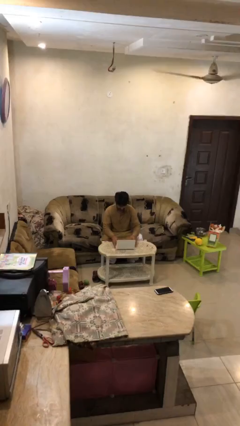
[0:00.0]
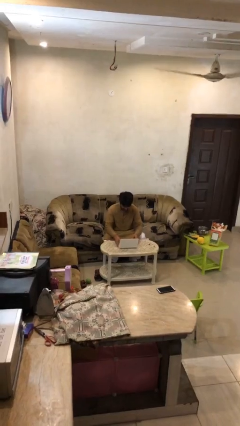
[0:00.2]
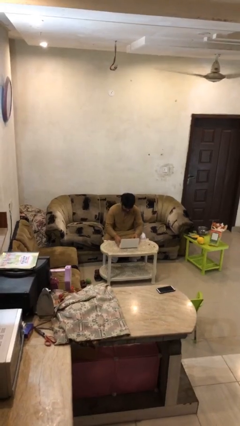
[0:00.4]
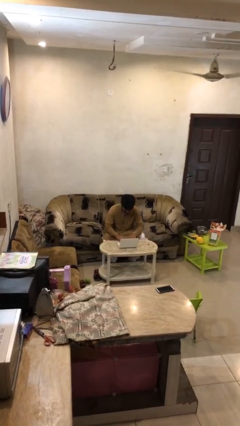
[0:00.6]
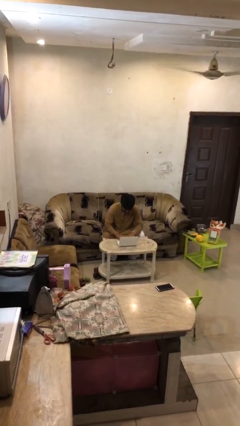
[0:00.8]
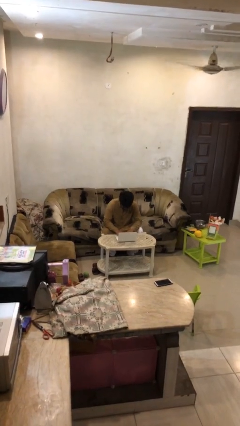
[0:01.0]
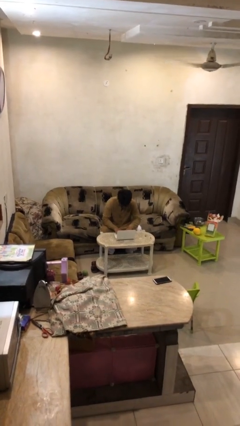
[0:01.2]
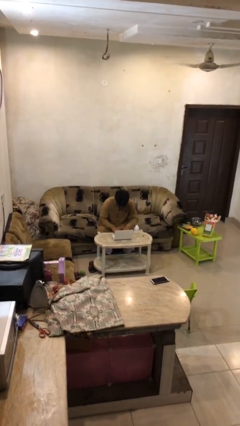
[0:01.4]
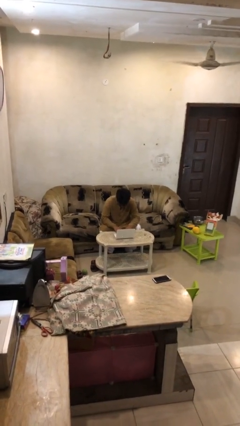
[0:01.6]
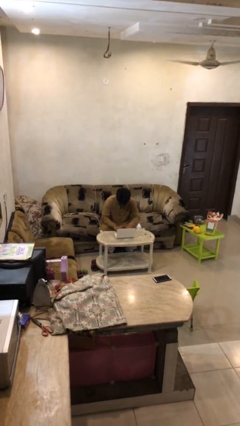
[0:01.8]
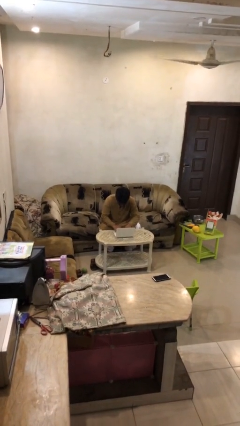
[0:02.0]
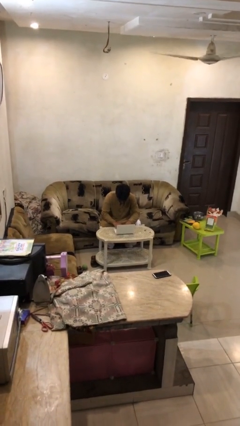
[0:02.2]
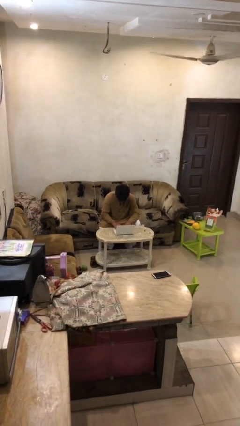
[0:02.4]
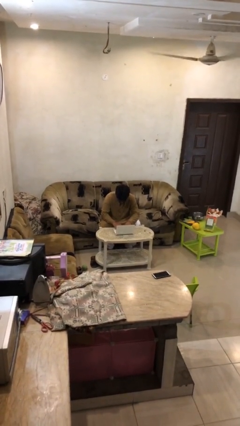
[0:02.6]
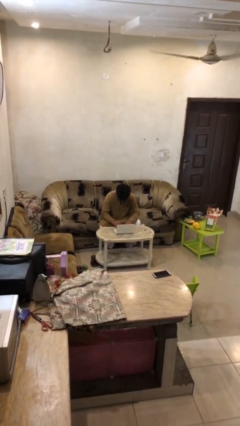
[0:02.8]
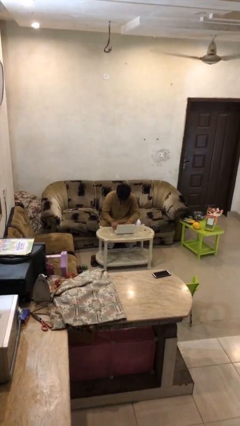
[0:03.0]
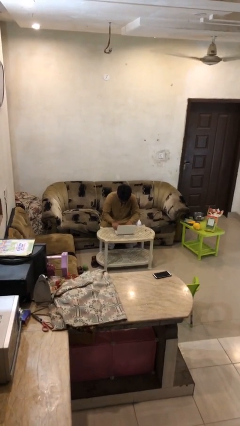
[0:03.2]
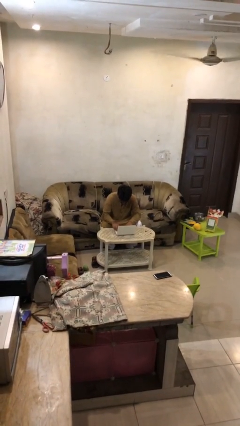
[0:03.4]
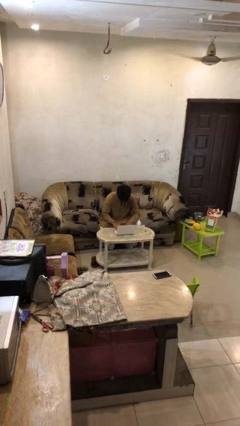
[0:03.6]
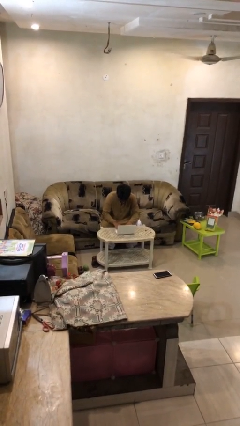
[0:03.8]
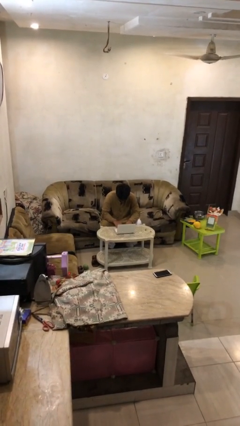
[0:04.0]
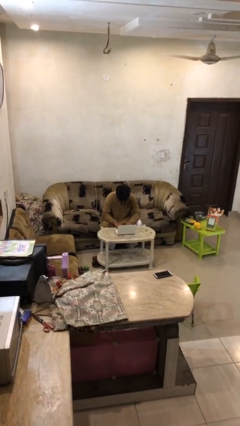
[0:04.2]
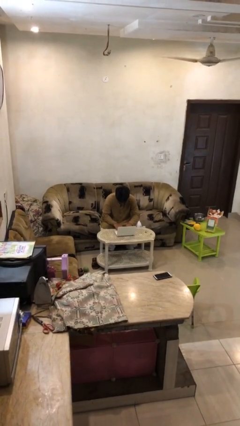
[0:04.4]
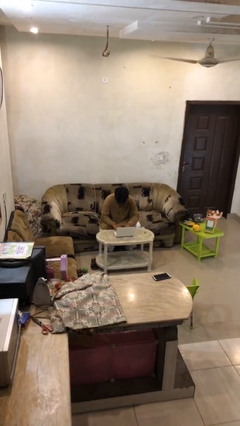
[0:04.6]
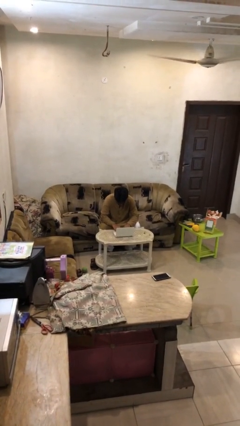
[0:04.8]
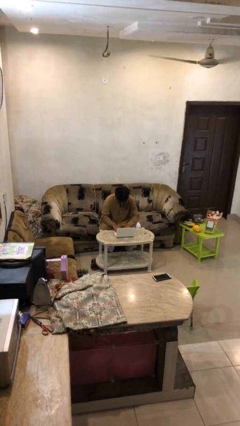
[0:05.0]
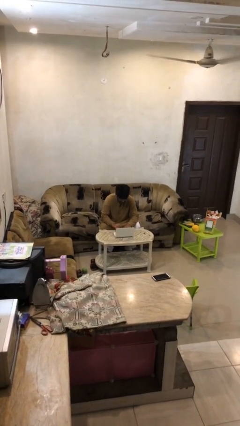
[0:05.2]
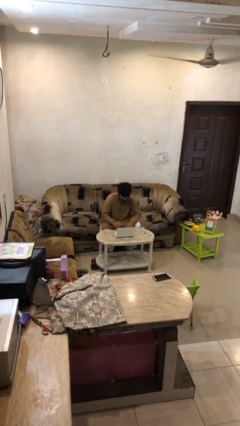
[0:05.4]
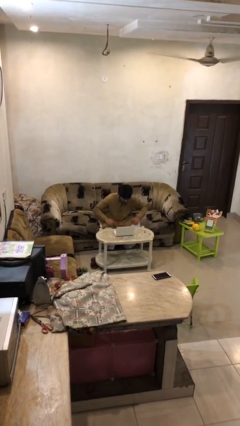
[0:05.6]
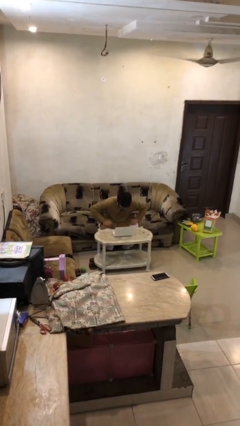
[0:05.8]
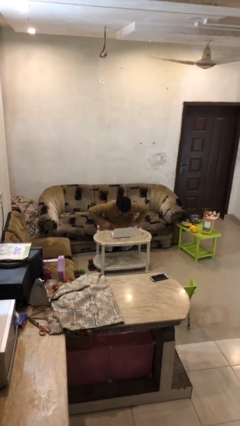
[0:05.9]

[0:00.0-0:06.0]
person interacts with laptop

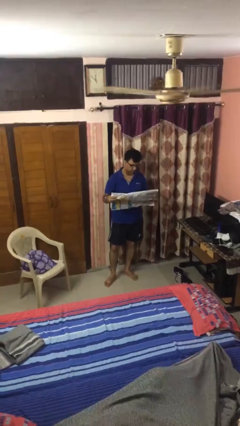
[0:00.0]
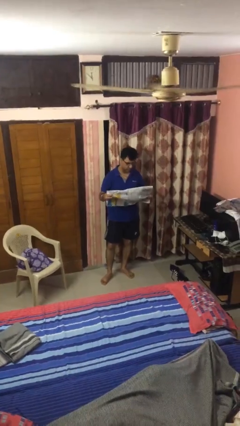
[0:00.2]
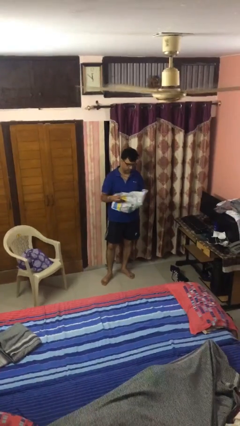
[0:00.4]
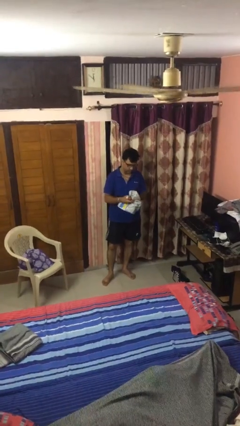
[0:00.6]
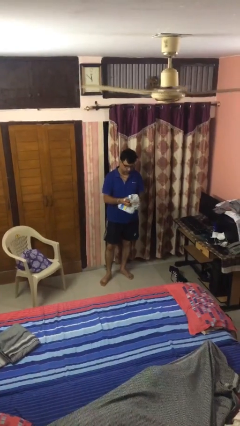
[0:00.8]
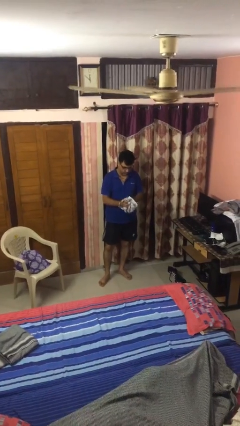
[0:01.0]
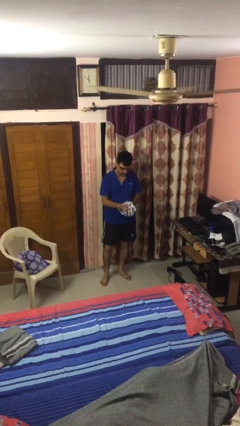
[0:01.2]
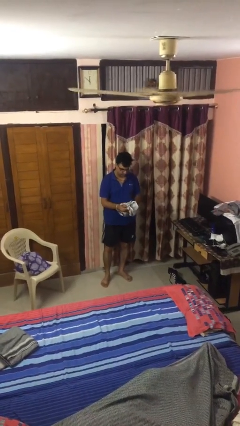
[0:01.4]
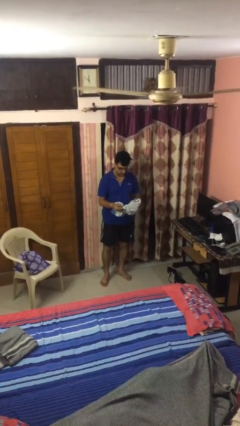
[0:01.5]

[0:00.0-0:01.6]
person crumples paper

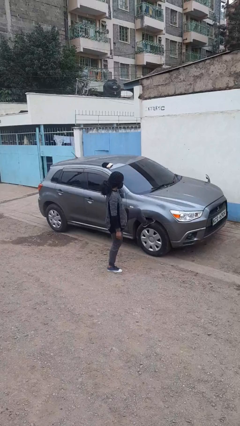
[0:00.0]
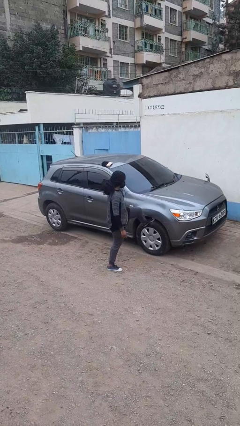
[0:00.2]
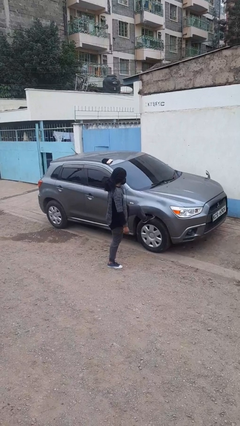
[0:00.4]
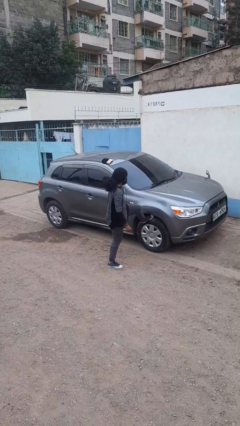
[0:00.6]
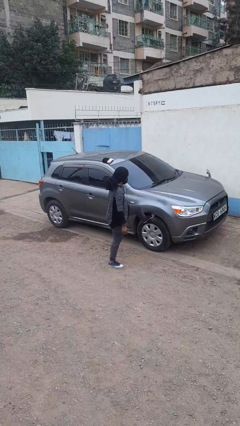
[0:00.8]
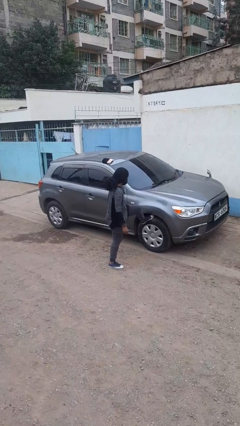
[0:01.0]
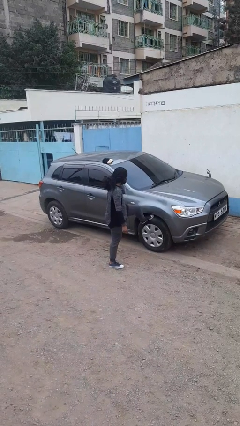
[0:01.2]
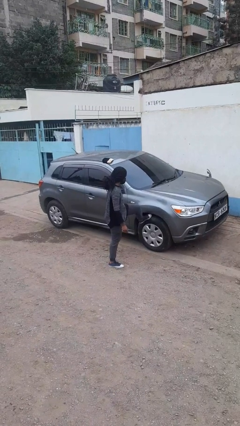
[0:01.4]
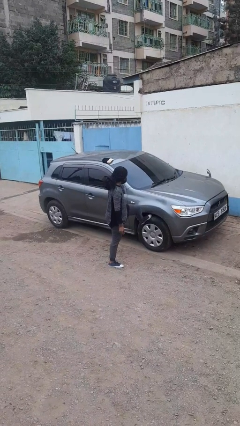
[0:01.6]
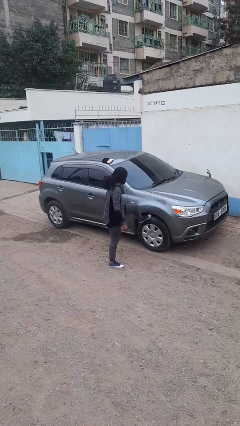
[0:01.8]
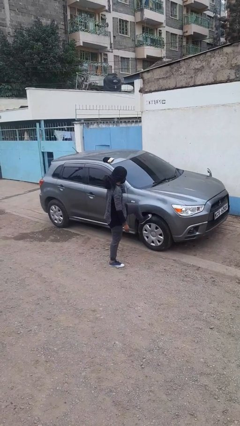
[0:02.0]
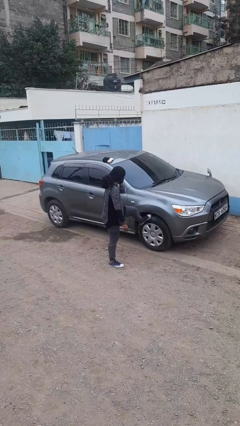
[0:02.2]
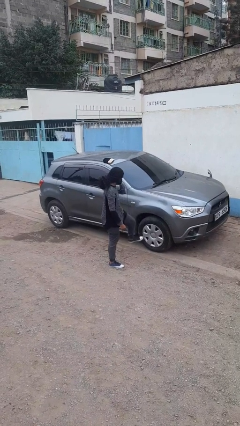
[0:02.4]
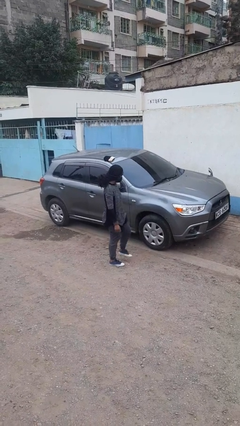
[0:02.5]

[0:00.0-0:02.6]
person kicks car tires

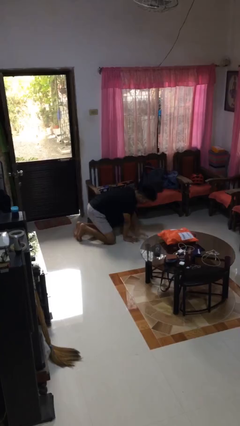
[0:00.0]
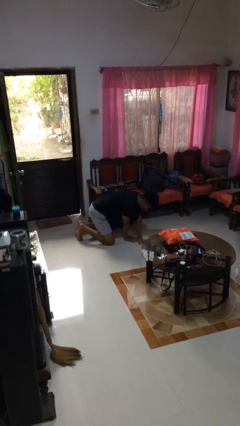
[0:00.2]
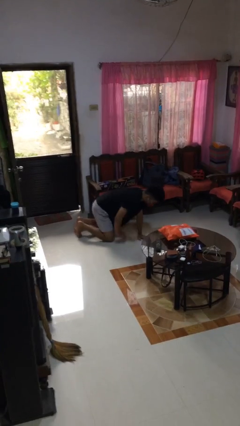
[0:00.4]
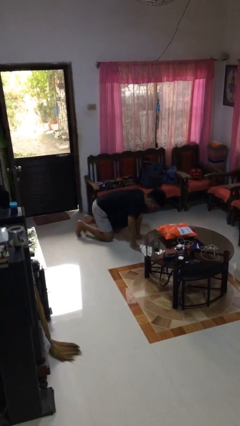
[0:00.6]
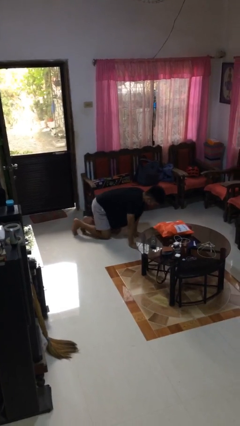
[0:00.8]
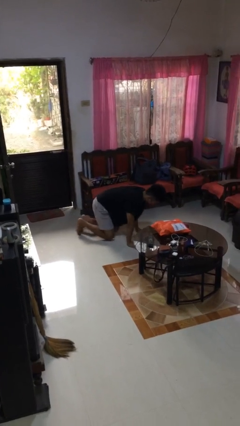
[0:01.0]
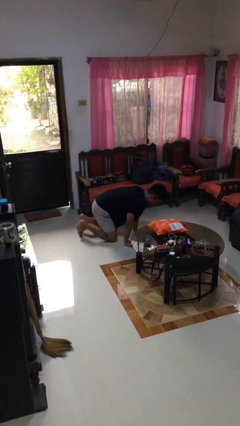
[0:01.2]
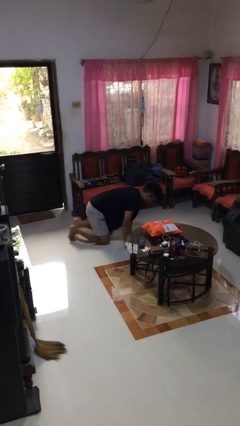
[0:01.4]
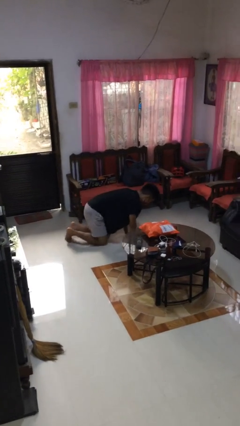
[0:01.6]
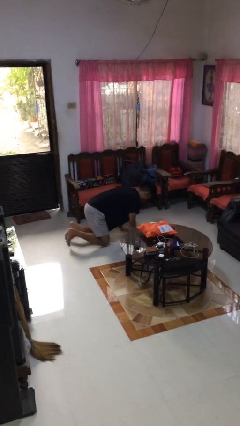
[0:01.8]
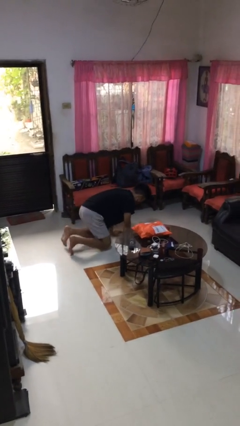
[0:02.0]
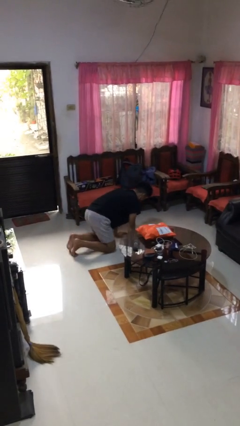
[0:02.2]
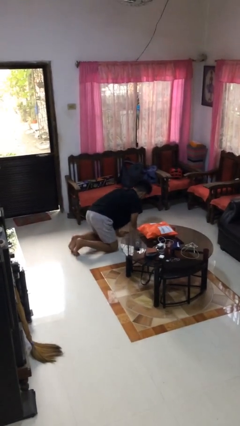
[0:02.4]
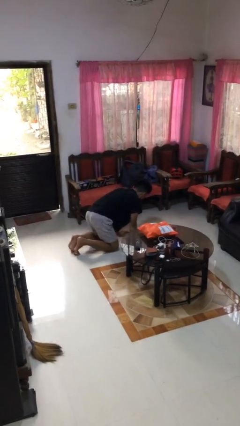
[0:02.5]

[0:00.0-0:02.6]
person crawls

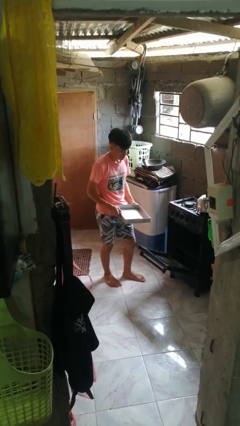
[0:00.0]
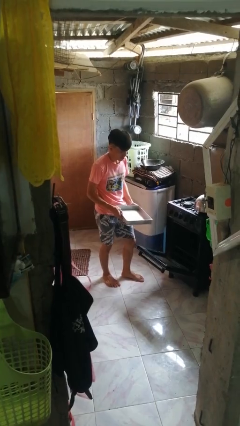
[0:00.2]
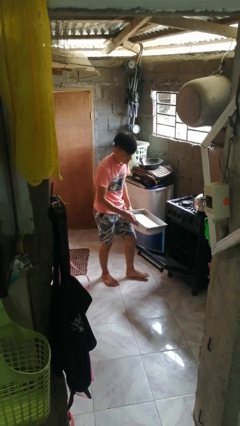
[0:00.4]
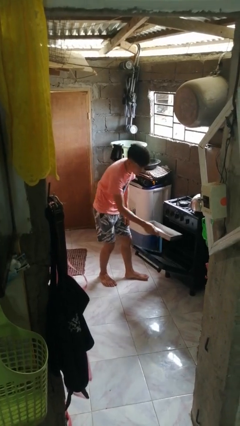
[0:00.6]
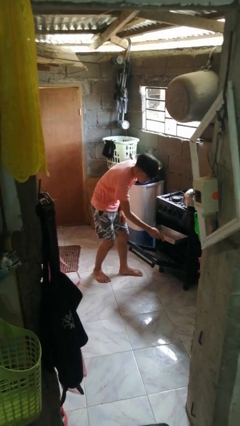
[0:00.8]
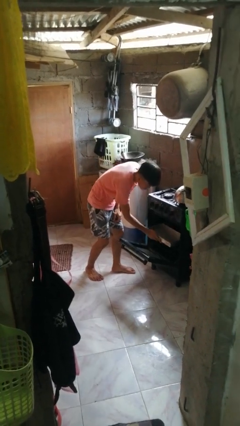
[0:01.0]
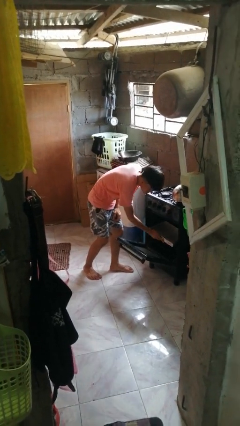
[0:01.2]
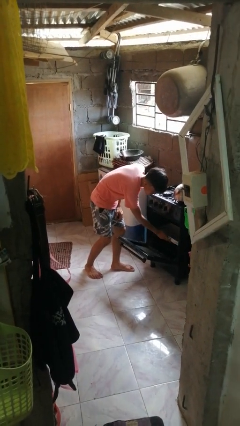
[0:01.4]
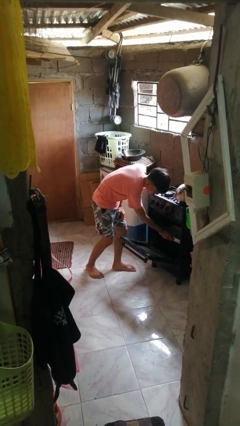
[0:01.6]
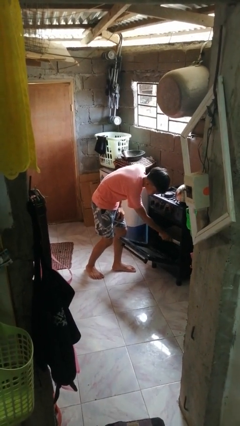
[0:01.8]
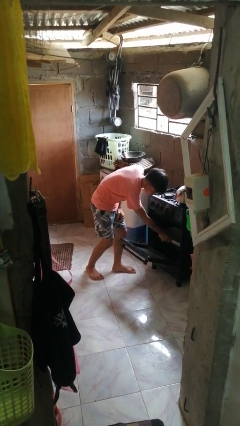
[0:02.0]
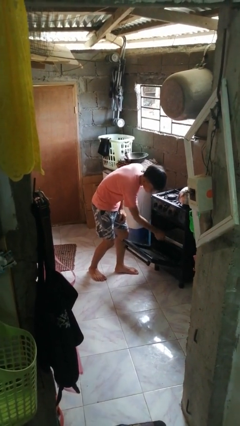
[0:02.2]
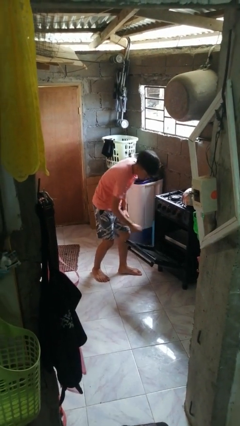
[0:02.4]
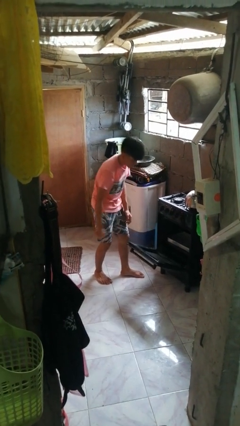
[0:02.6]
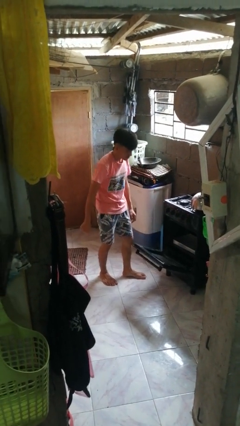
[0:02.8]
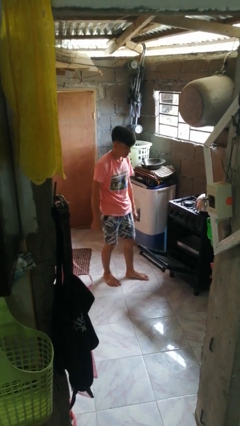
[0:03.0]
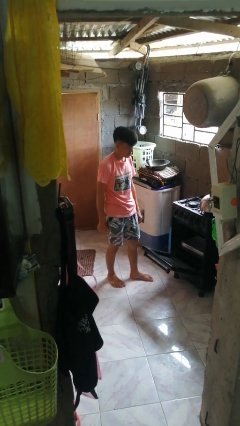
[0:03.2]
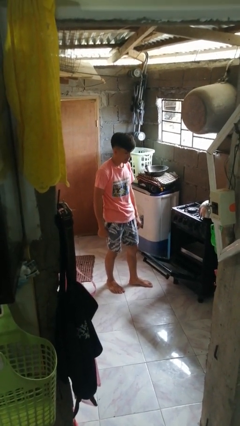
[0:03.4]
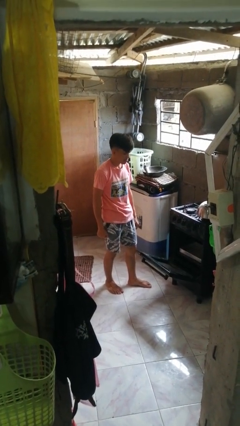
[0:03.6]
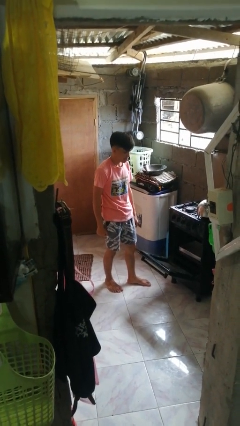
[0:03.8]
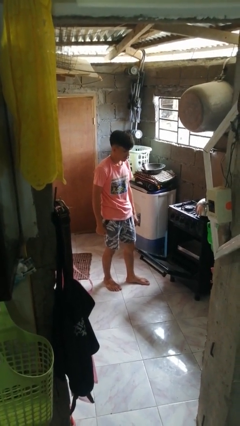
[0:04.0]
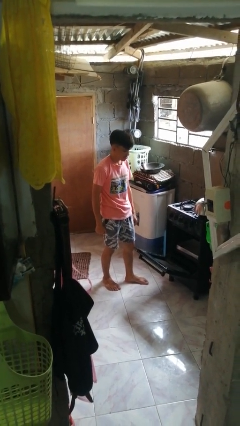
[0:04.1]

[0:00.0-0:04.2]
person puts object into oven

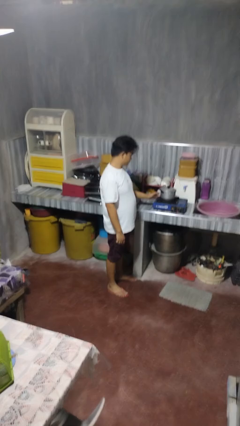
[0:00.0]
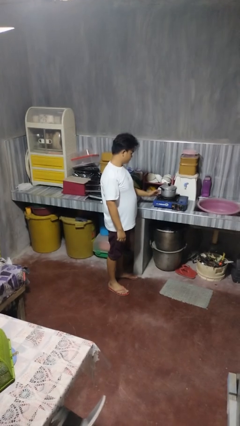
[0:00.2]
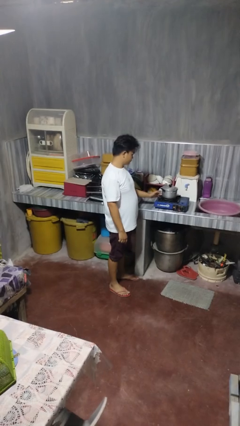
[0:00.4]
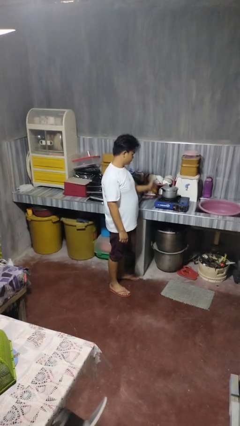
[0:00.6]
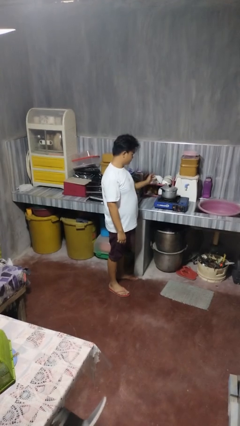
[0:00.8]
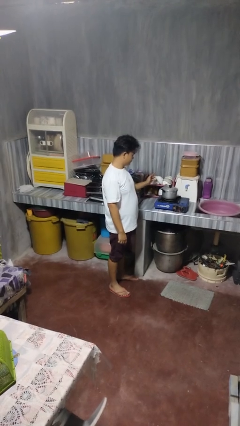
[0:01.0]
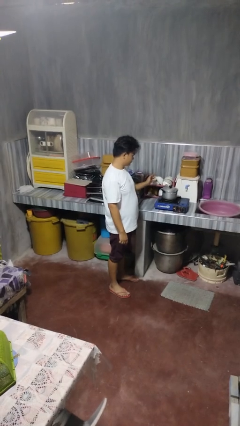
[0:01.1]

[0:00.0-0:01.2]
person burns hand
